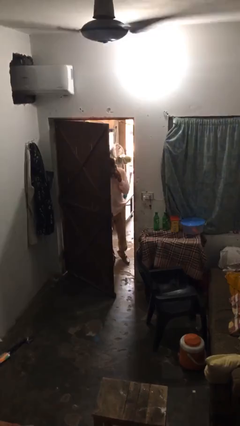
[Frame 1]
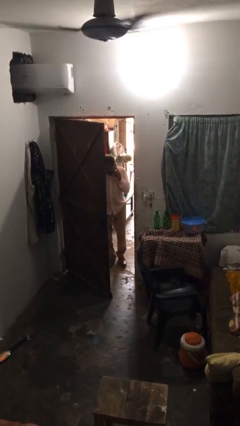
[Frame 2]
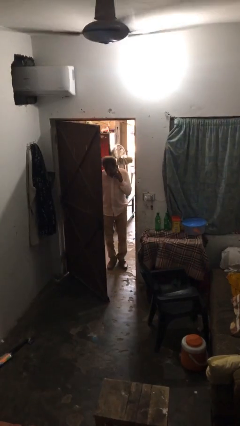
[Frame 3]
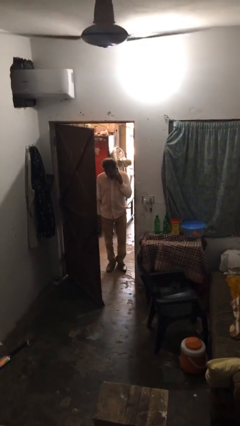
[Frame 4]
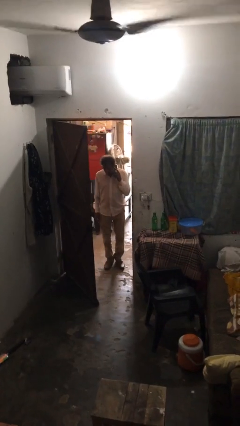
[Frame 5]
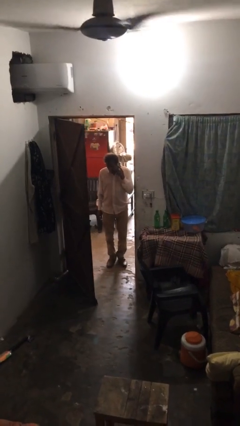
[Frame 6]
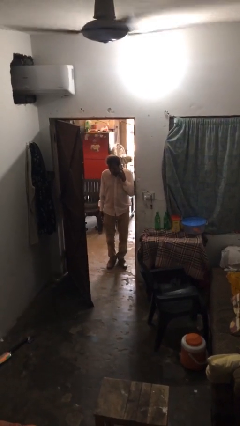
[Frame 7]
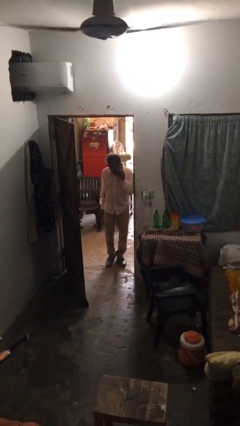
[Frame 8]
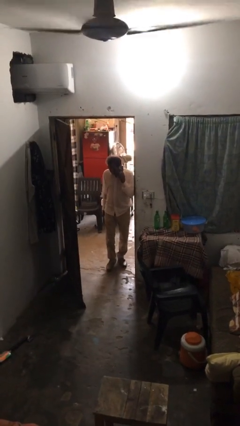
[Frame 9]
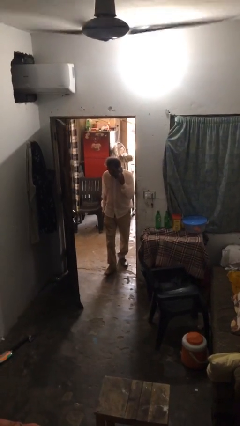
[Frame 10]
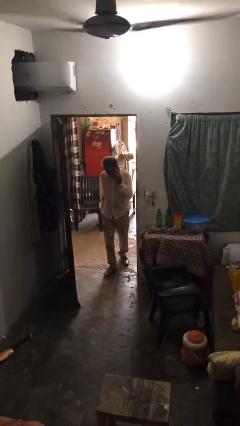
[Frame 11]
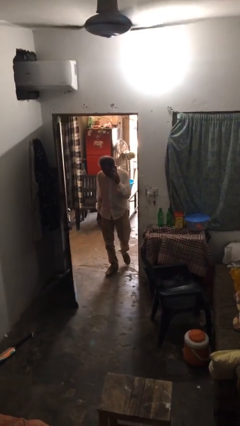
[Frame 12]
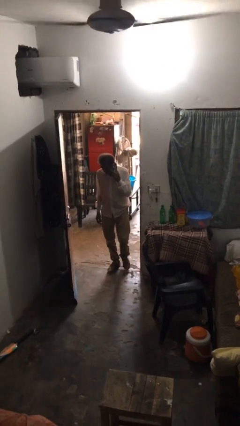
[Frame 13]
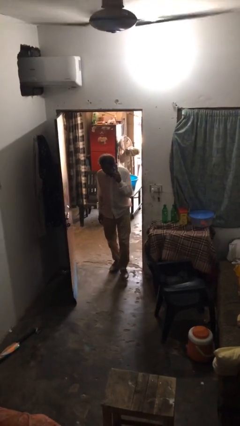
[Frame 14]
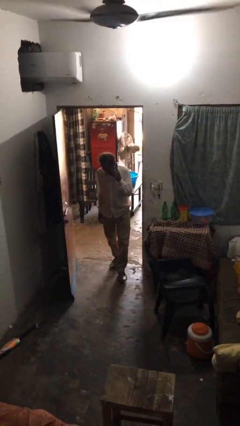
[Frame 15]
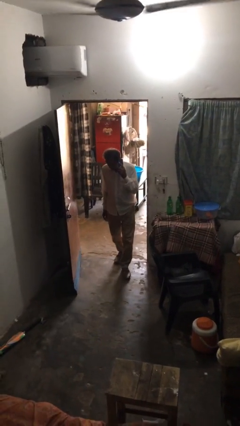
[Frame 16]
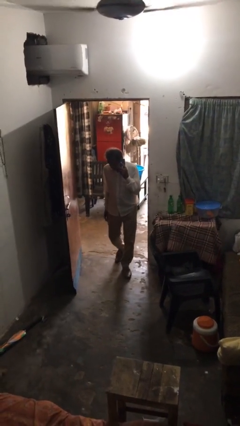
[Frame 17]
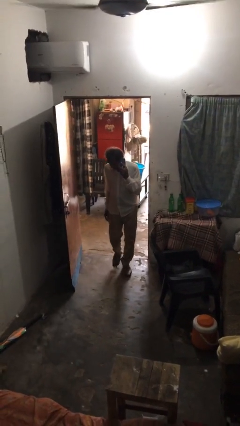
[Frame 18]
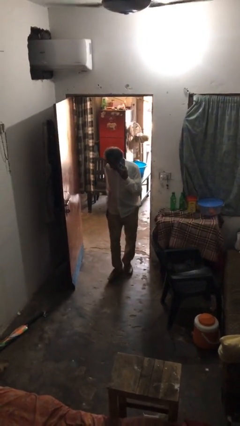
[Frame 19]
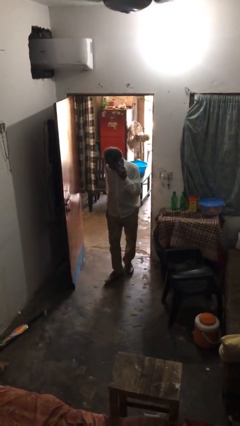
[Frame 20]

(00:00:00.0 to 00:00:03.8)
person enters scene through structure

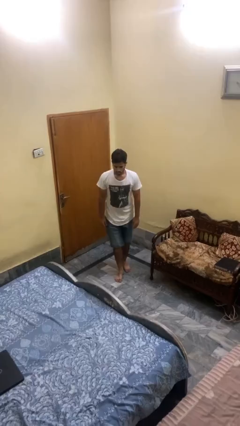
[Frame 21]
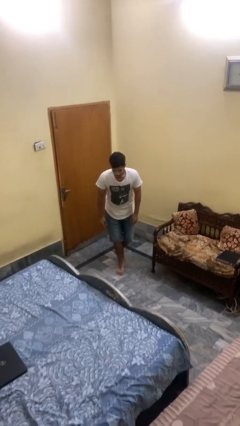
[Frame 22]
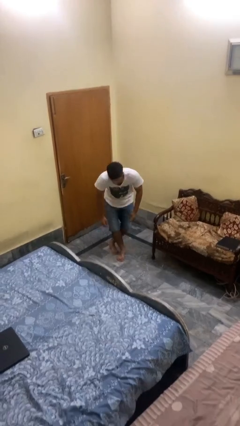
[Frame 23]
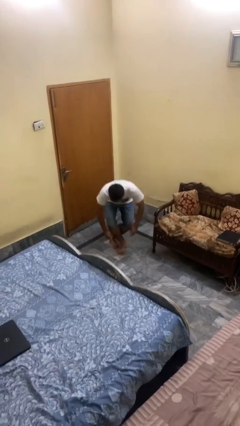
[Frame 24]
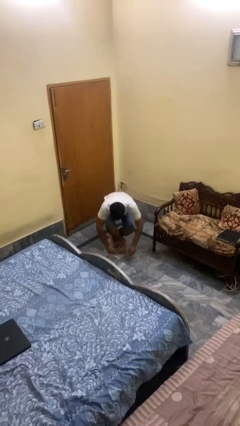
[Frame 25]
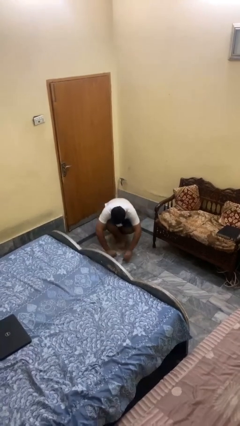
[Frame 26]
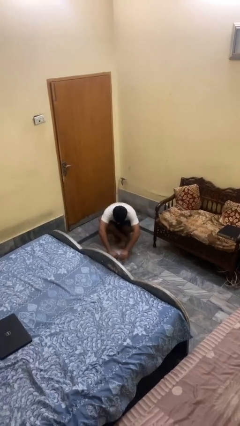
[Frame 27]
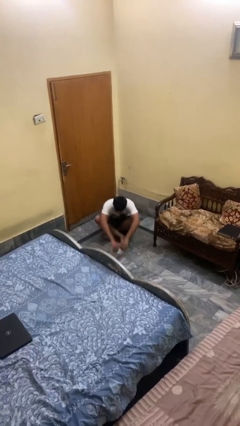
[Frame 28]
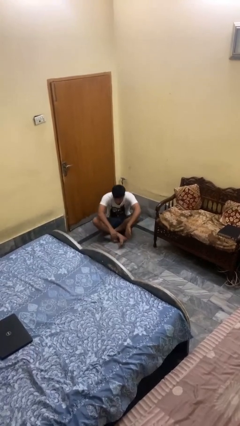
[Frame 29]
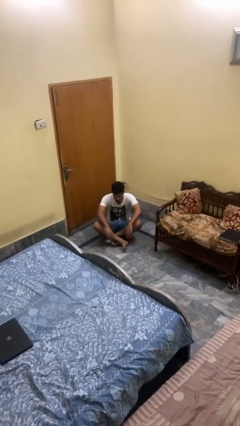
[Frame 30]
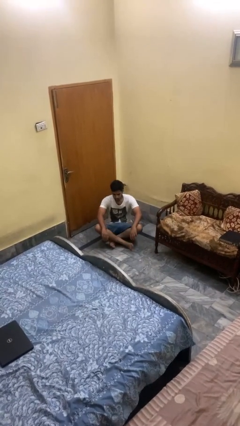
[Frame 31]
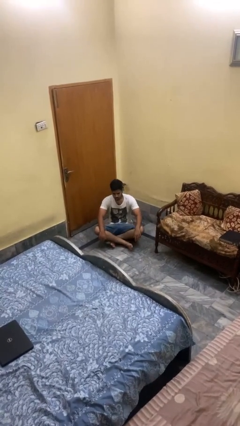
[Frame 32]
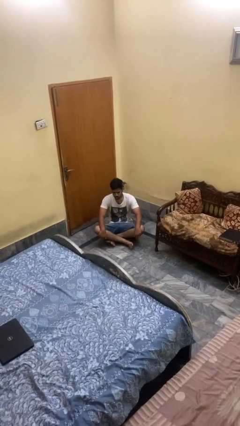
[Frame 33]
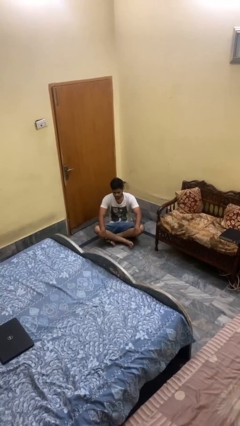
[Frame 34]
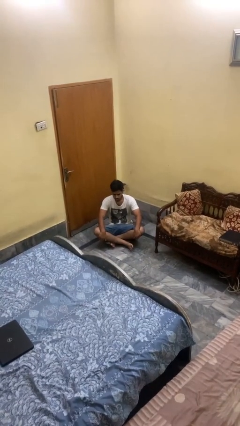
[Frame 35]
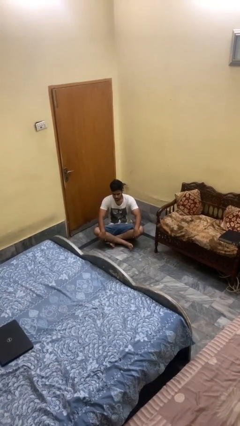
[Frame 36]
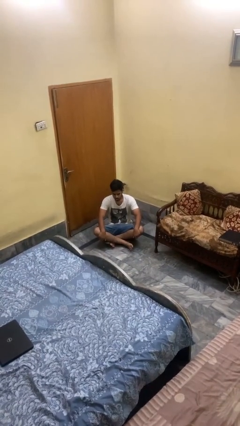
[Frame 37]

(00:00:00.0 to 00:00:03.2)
person sits crisscross

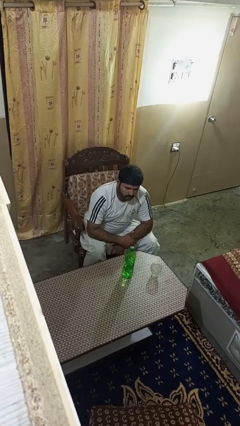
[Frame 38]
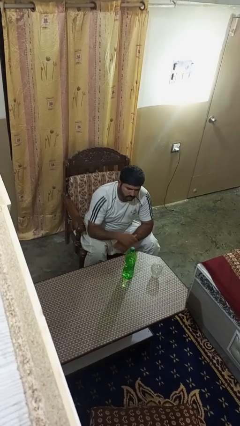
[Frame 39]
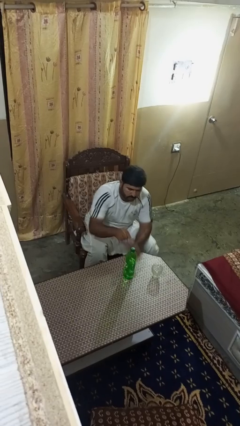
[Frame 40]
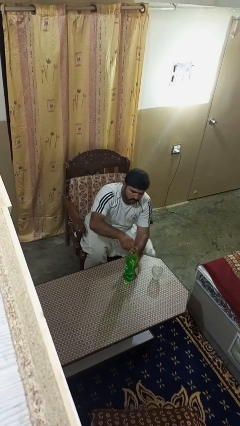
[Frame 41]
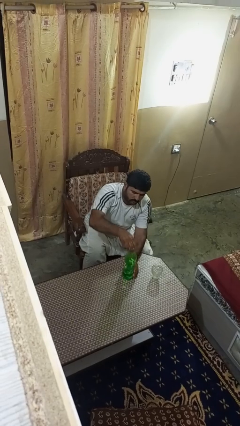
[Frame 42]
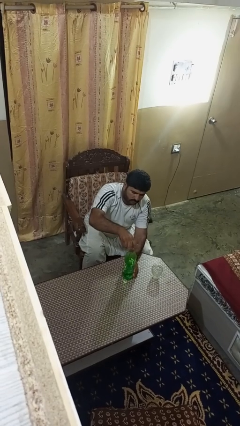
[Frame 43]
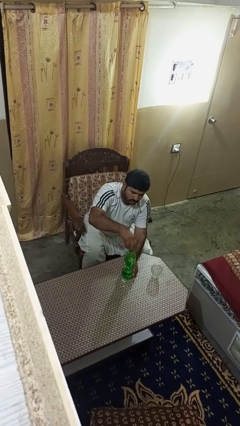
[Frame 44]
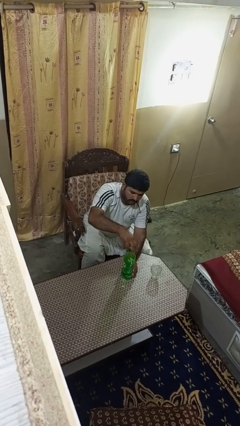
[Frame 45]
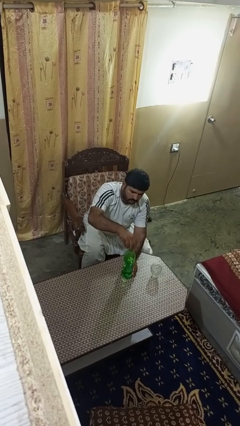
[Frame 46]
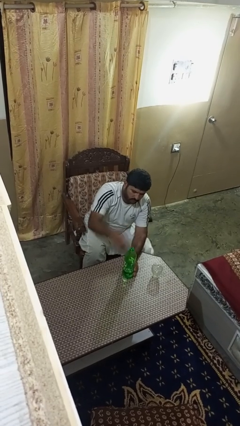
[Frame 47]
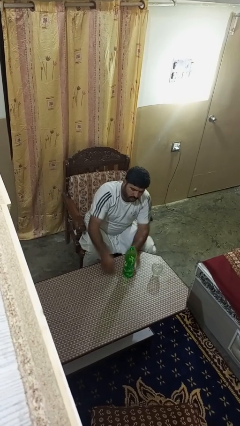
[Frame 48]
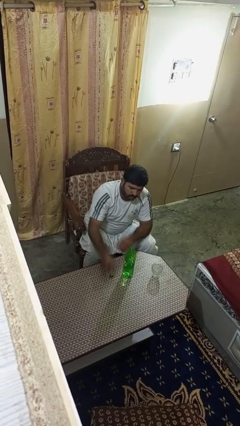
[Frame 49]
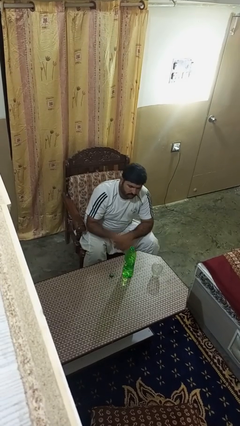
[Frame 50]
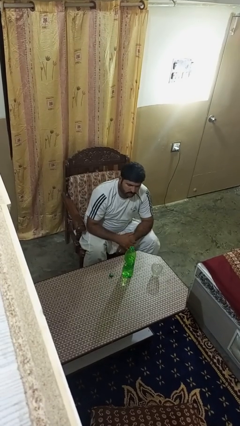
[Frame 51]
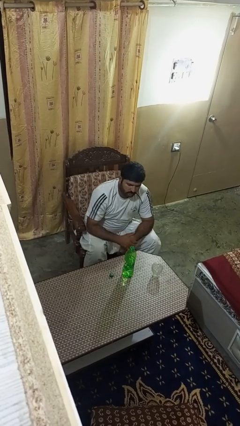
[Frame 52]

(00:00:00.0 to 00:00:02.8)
person unscrews lid from bottle

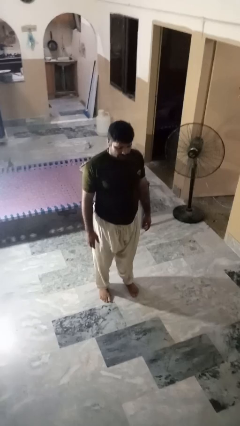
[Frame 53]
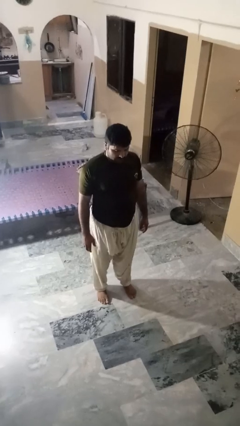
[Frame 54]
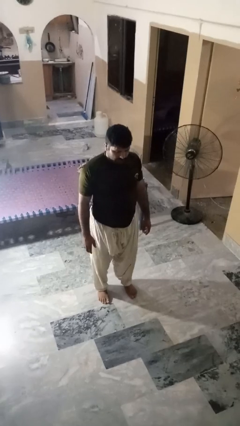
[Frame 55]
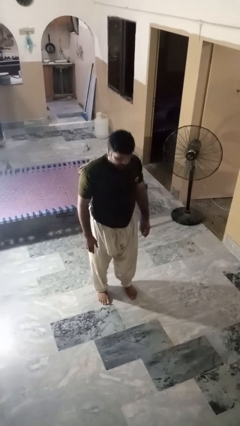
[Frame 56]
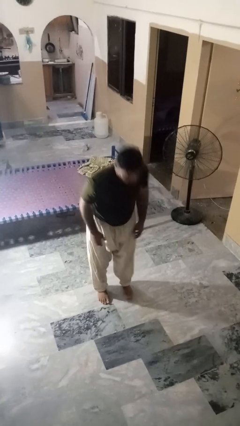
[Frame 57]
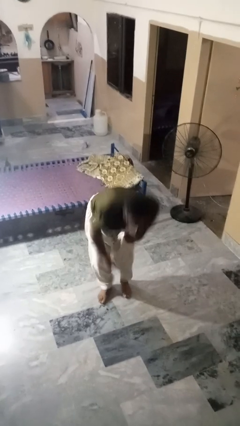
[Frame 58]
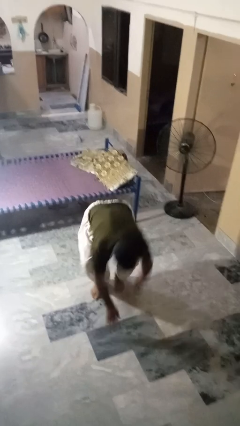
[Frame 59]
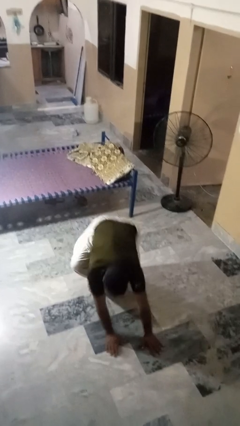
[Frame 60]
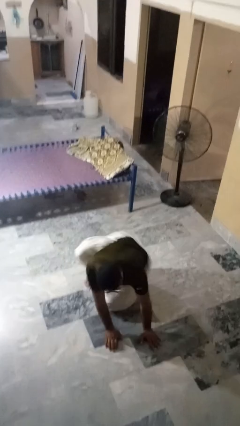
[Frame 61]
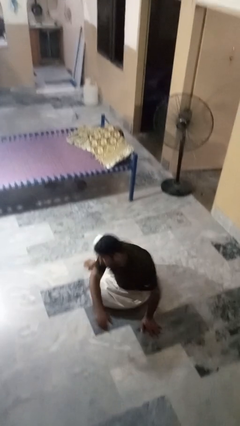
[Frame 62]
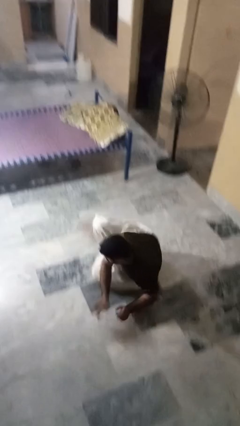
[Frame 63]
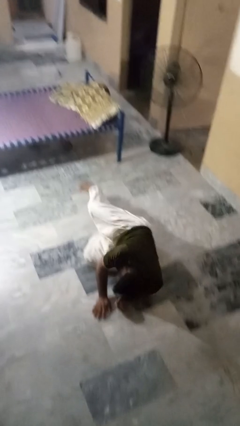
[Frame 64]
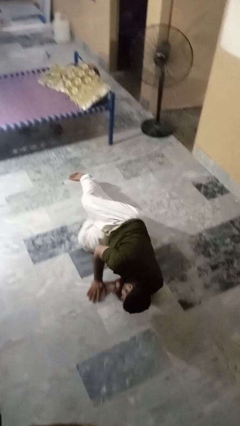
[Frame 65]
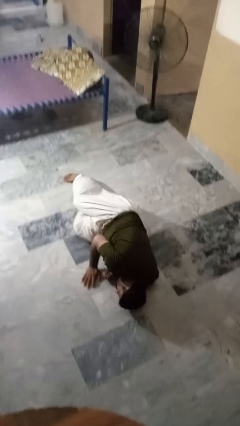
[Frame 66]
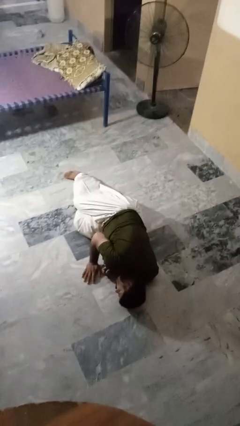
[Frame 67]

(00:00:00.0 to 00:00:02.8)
person falls while standing

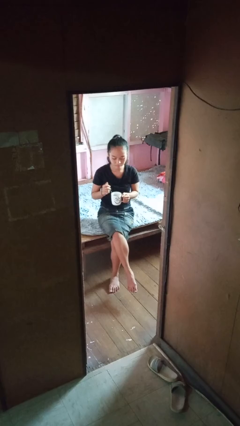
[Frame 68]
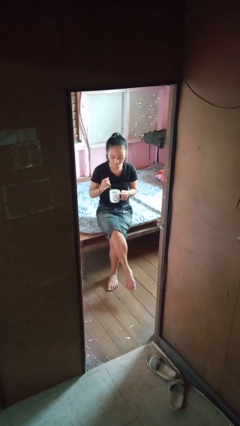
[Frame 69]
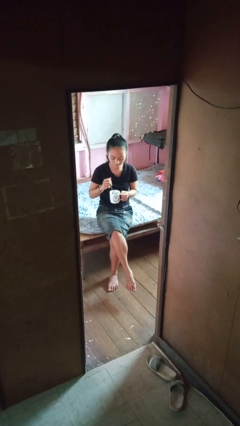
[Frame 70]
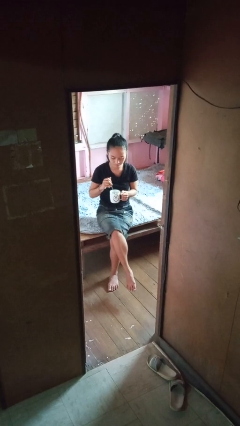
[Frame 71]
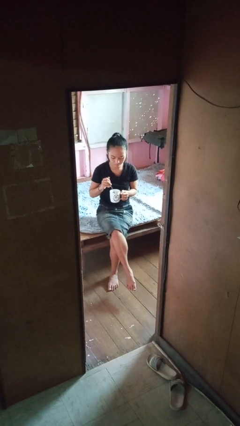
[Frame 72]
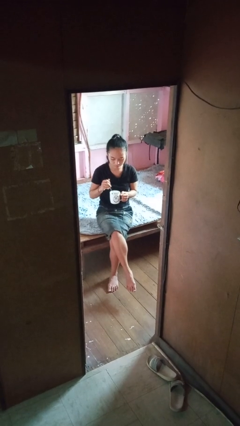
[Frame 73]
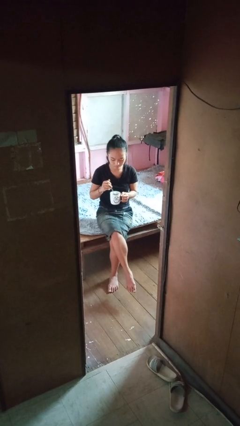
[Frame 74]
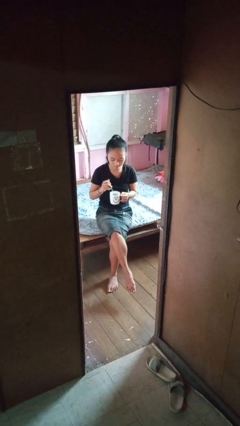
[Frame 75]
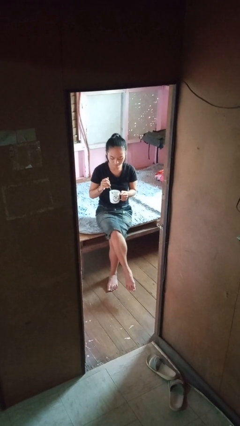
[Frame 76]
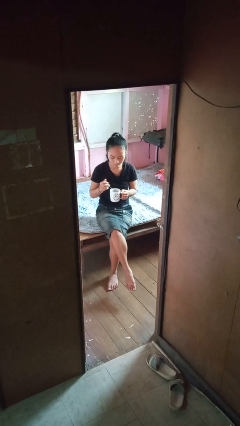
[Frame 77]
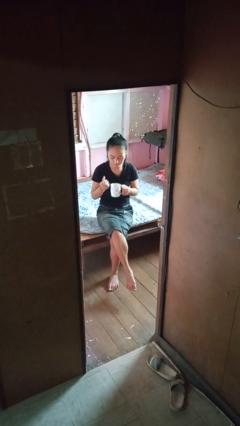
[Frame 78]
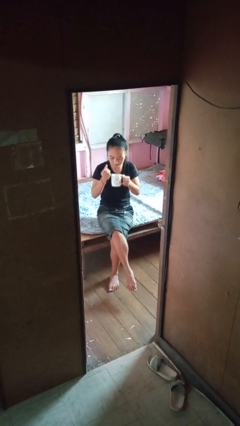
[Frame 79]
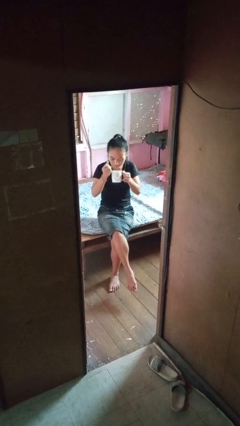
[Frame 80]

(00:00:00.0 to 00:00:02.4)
person stirs mug

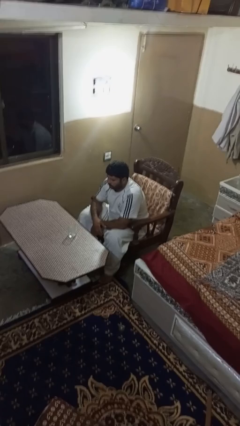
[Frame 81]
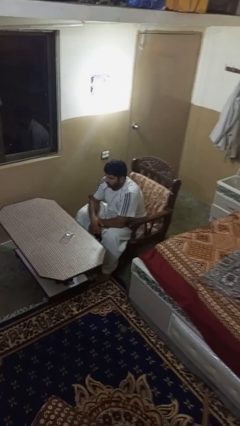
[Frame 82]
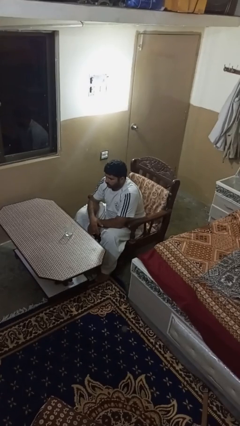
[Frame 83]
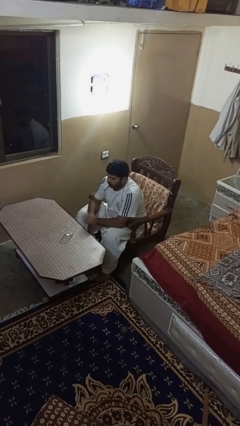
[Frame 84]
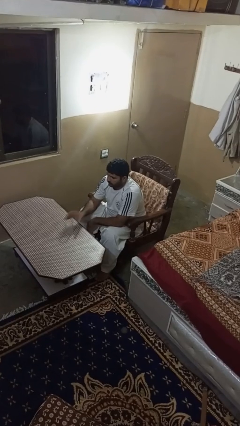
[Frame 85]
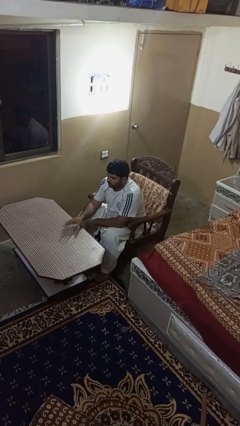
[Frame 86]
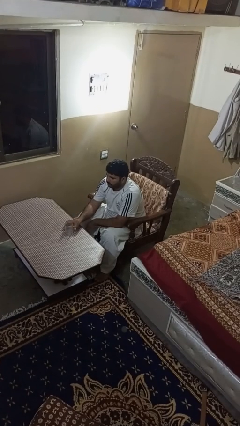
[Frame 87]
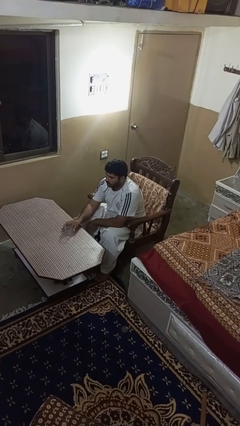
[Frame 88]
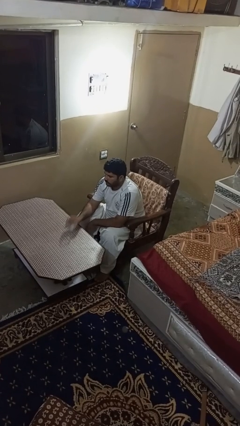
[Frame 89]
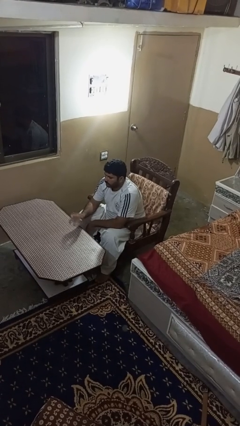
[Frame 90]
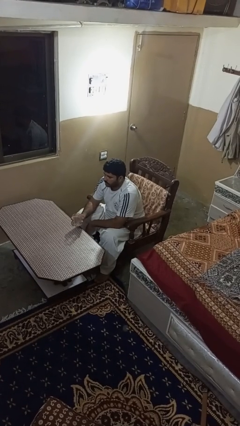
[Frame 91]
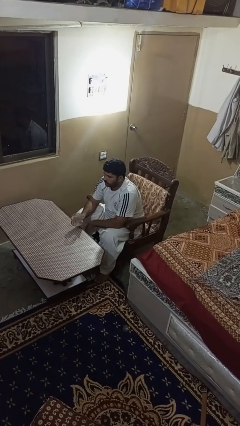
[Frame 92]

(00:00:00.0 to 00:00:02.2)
person picks up object from table
